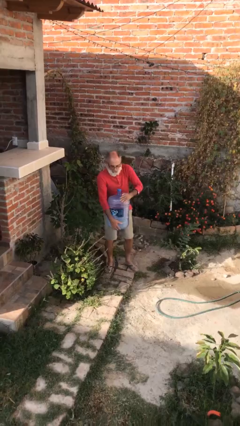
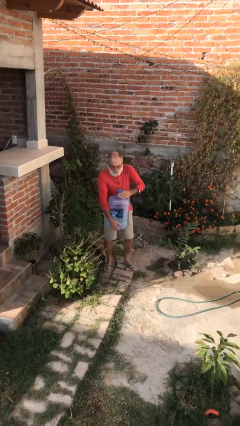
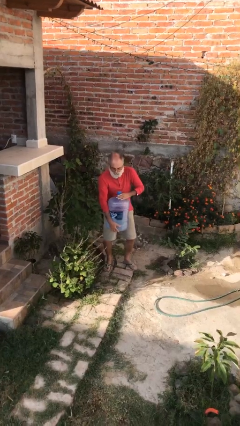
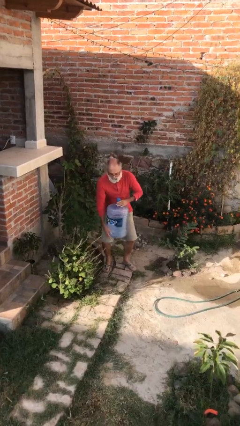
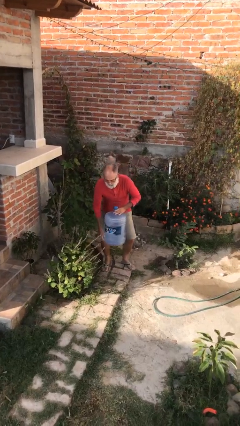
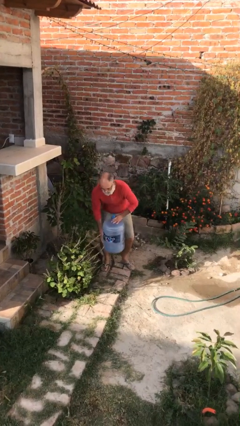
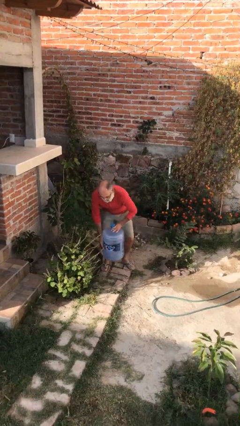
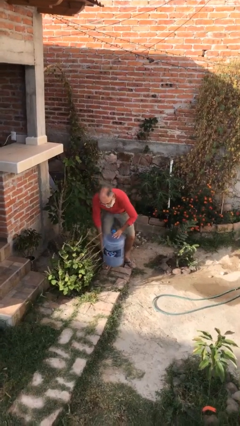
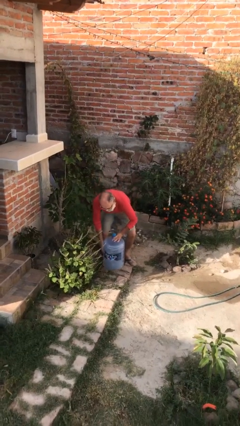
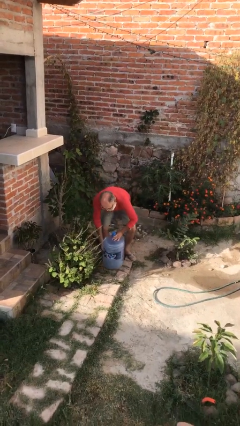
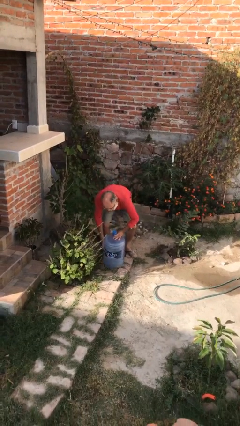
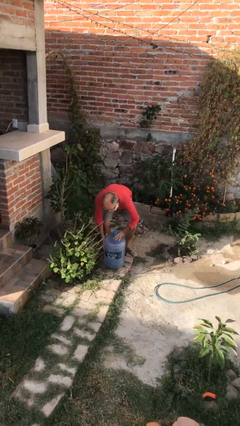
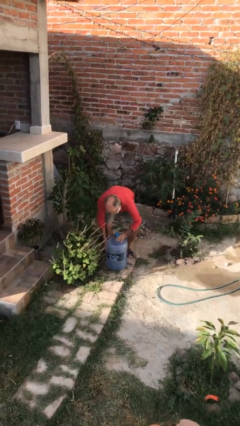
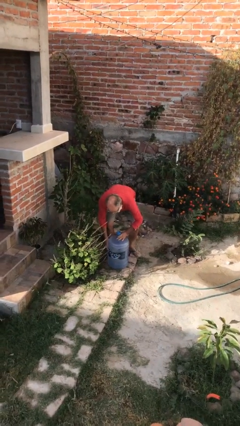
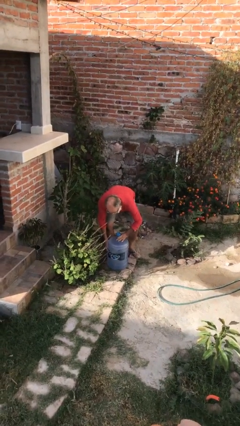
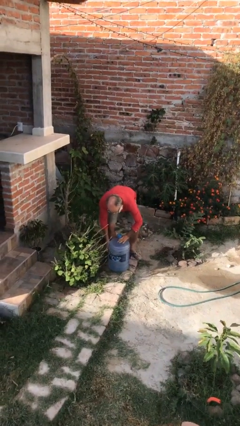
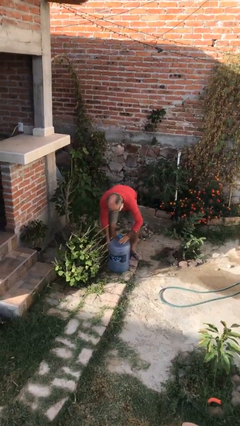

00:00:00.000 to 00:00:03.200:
person puts down object on floor

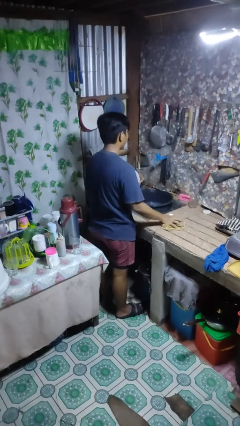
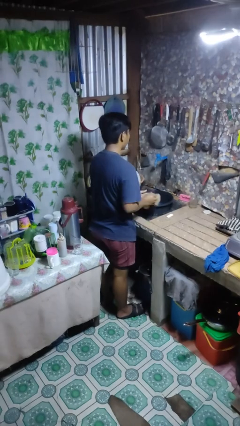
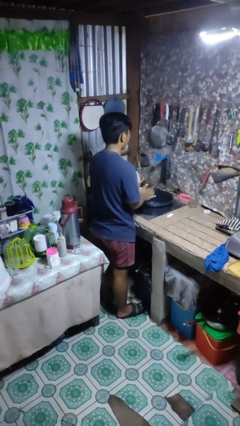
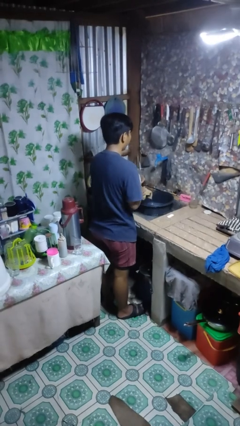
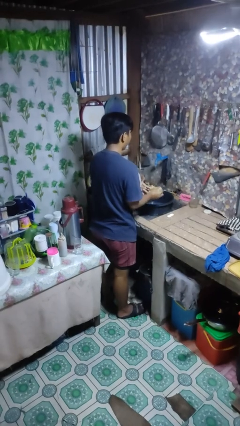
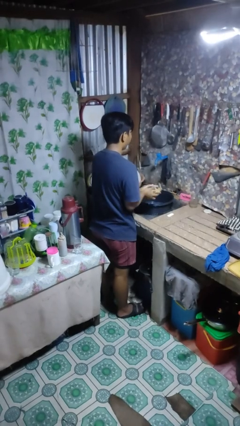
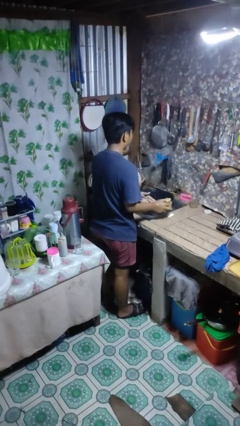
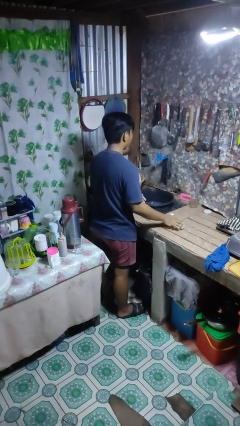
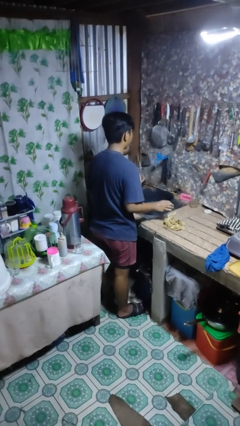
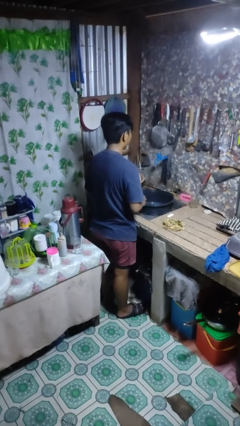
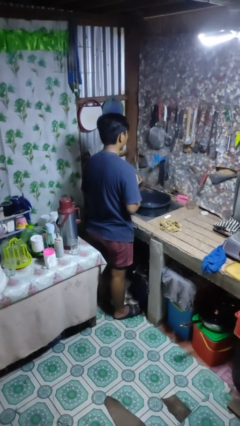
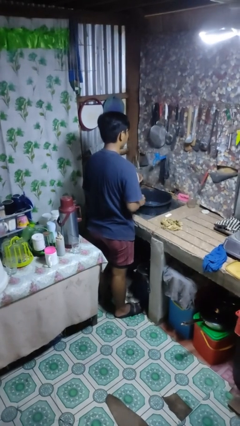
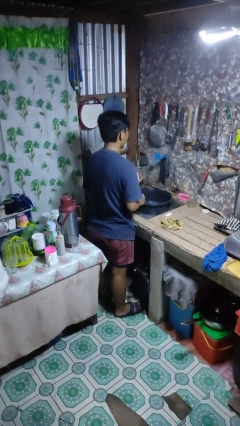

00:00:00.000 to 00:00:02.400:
person dries hands with towel

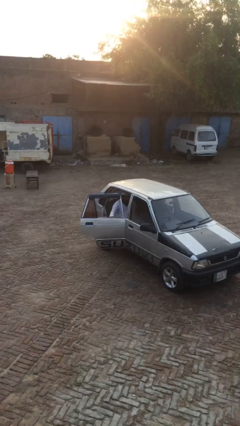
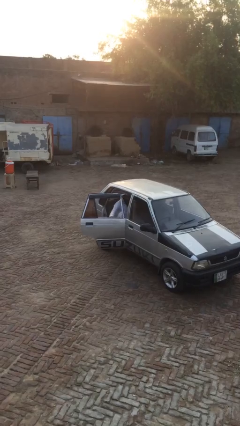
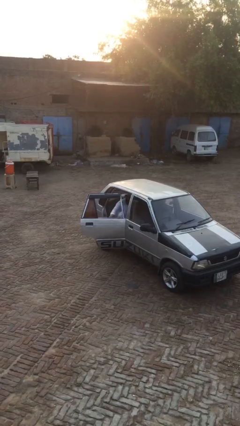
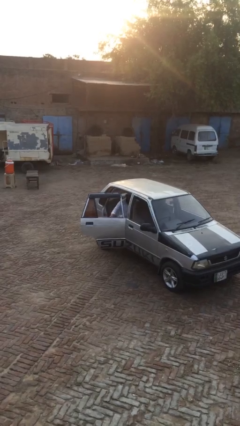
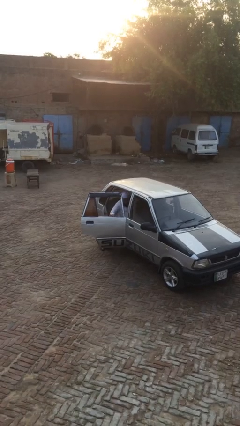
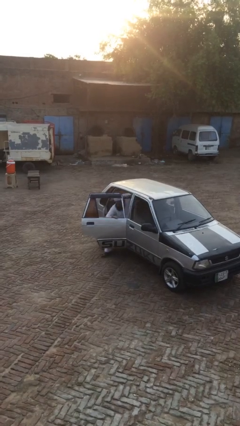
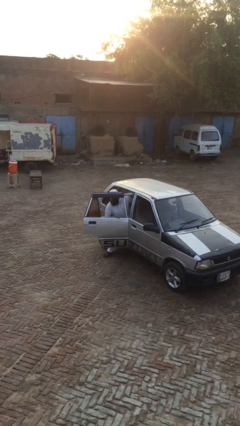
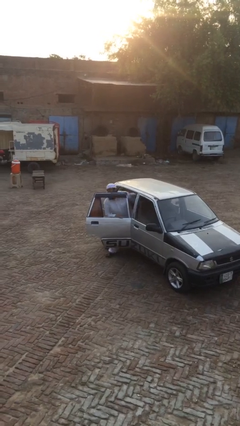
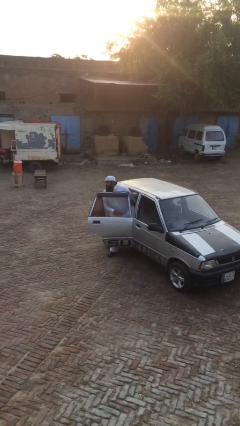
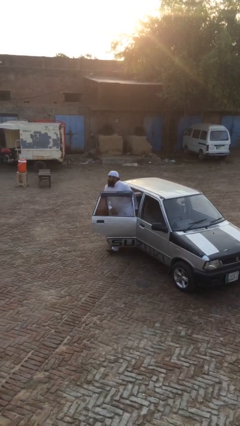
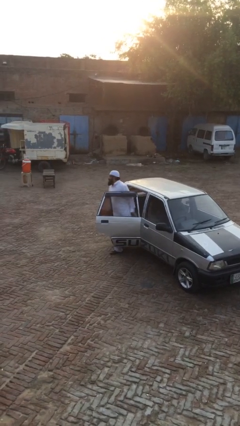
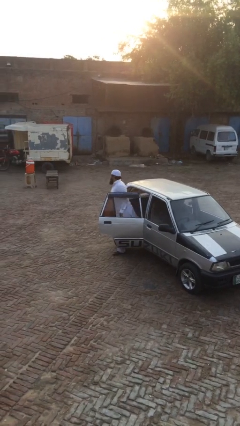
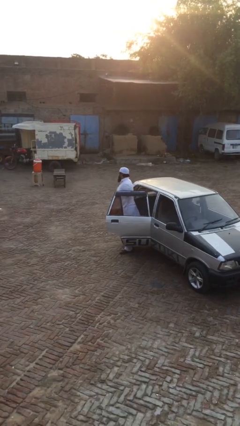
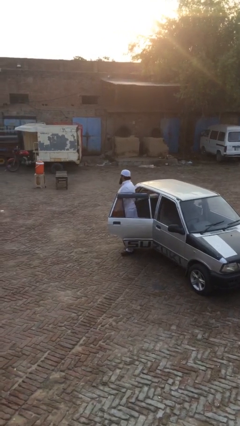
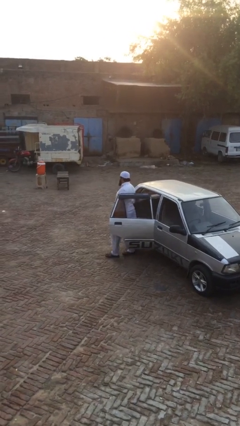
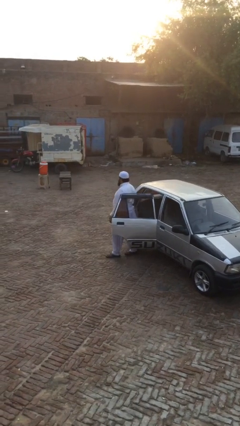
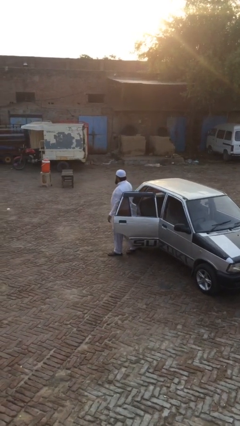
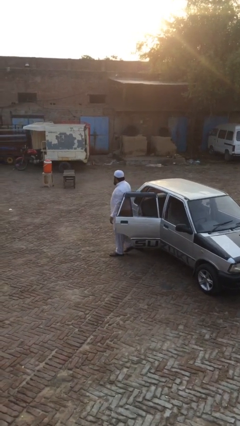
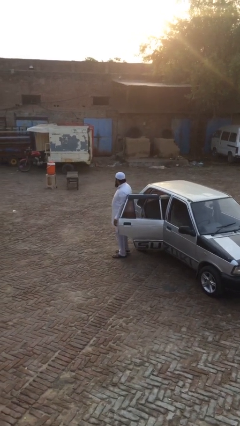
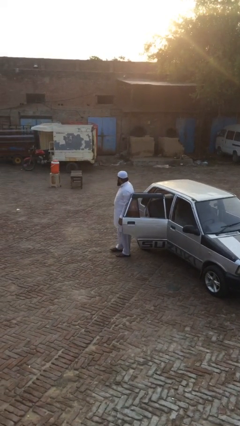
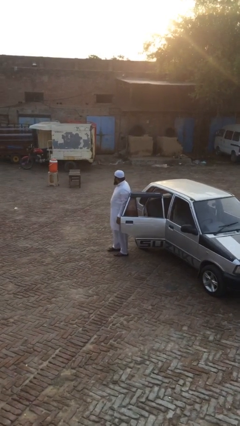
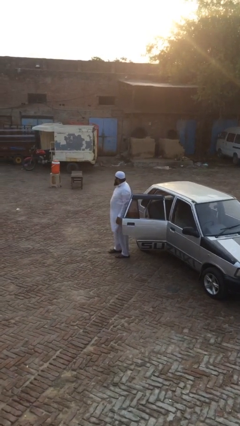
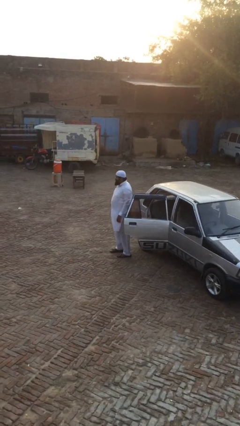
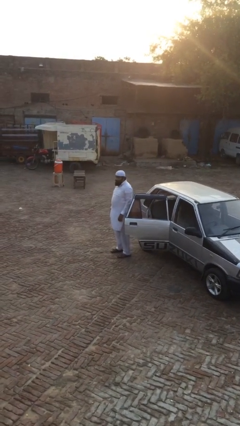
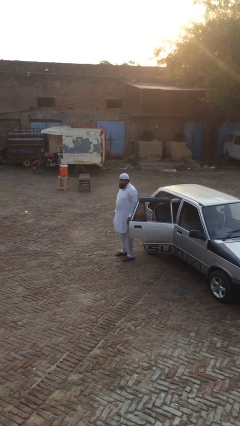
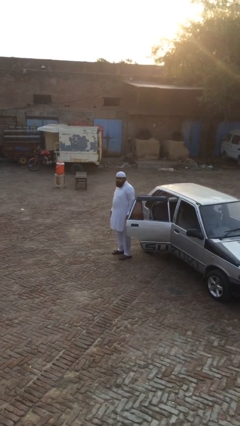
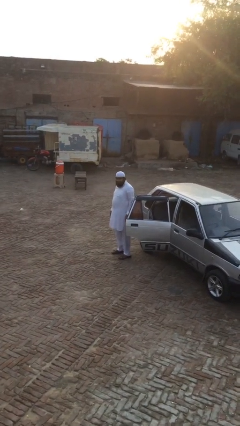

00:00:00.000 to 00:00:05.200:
person exits car

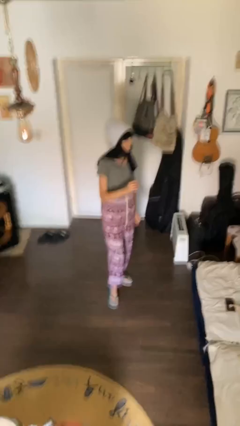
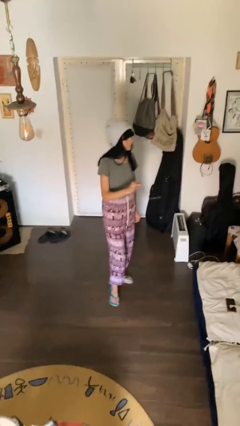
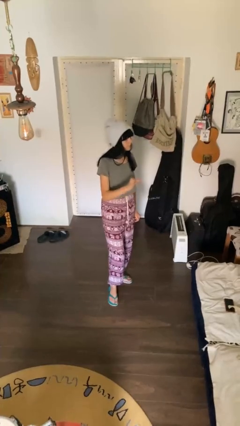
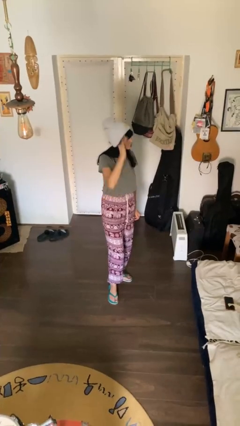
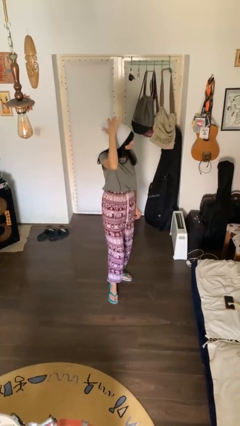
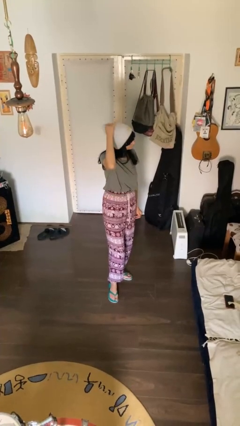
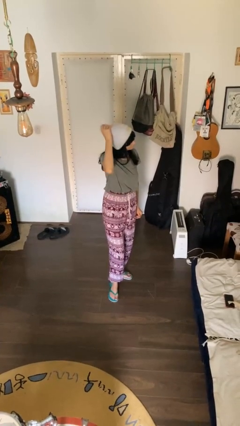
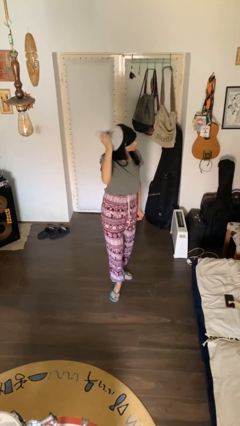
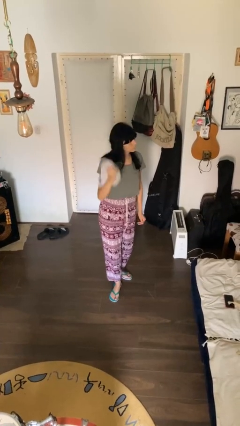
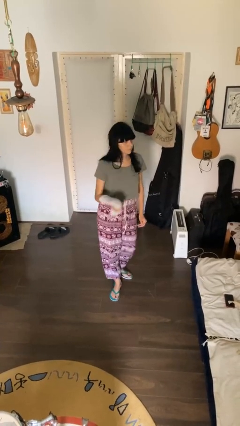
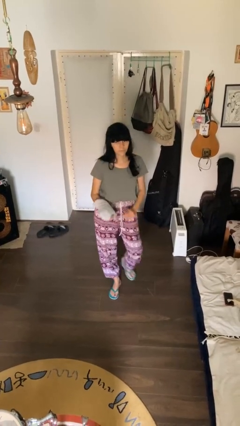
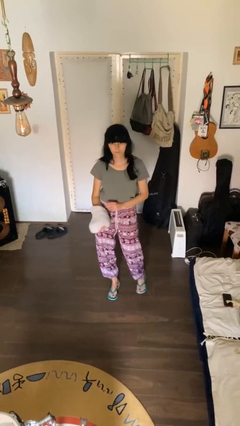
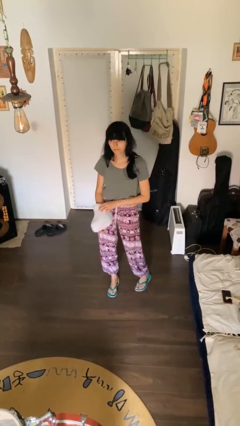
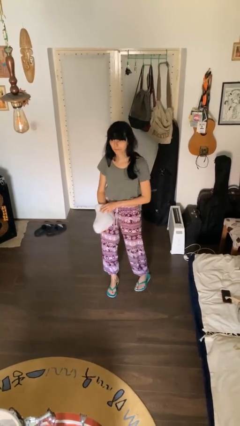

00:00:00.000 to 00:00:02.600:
person takes off hat

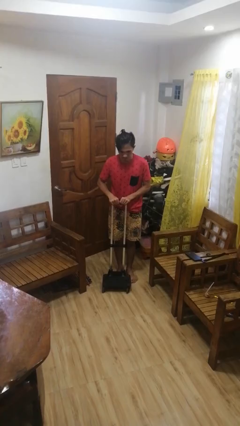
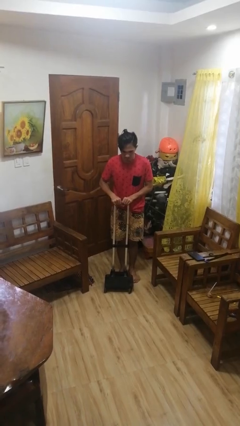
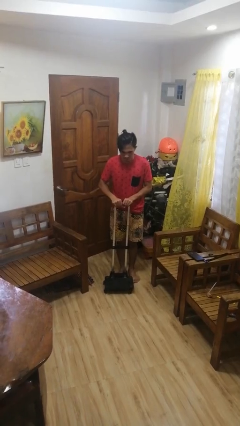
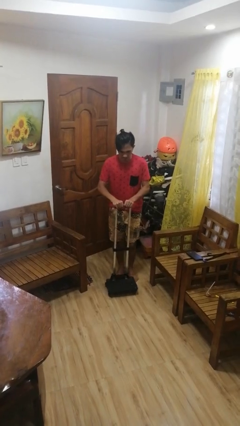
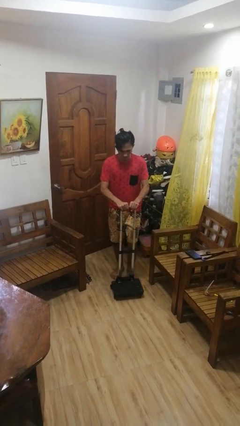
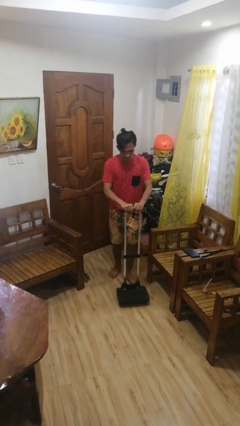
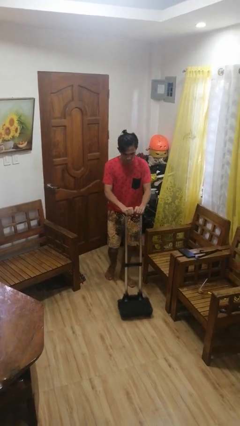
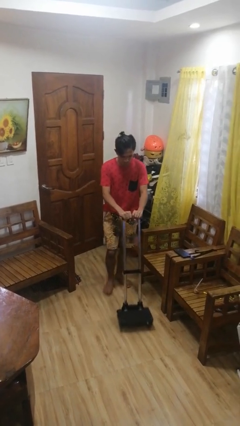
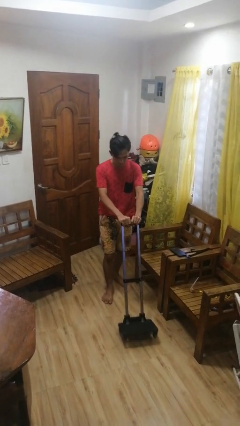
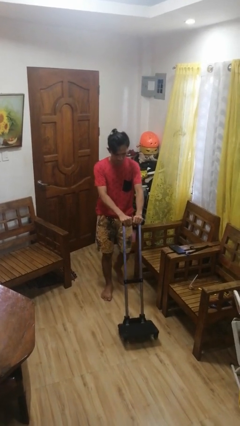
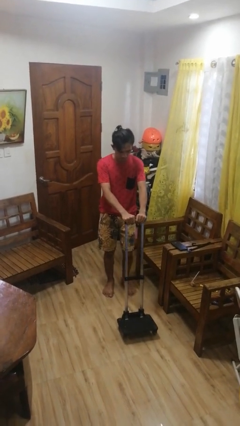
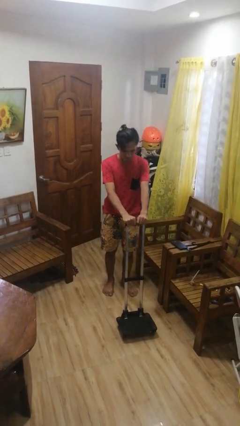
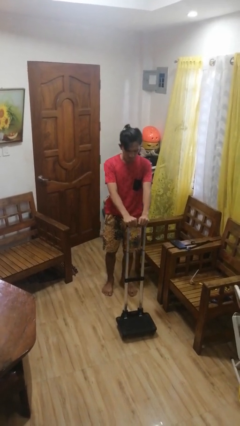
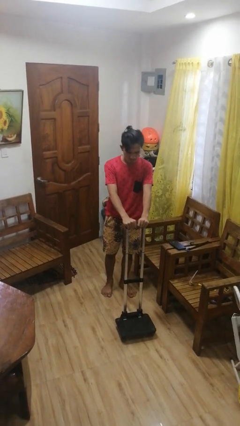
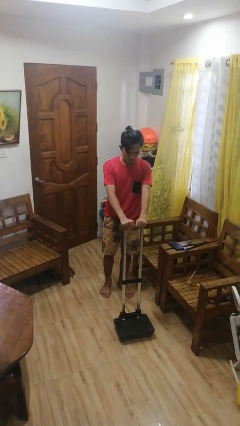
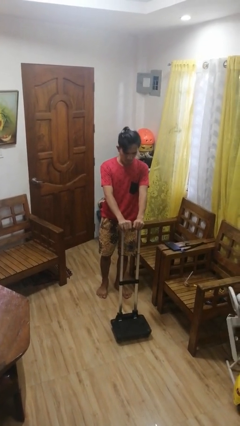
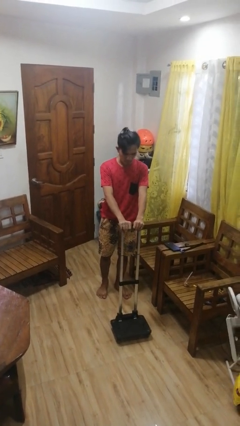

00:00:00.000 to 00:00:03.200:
person pushes wheeled cart

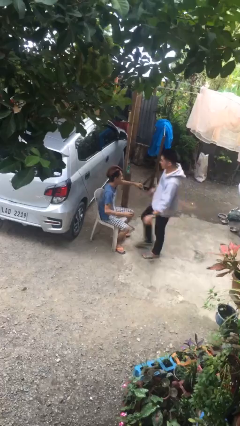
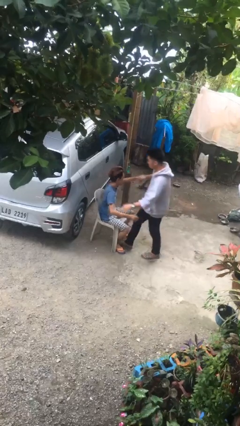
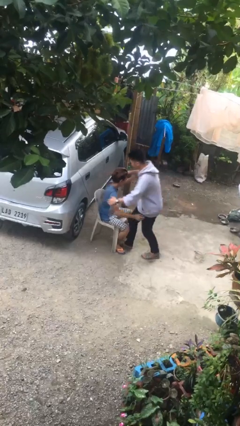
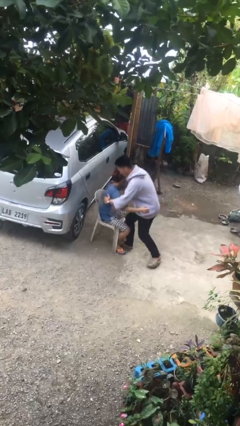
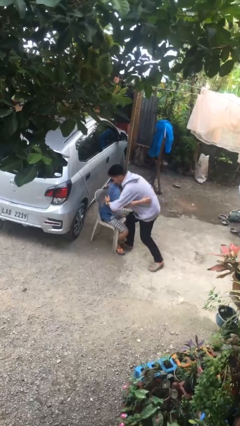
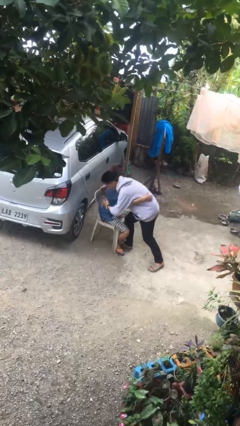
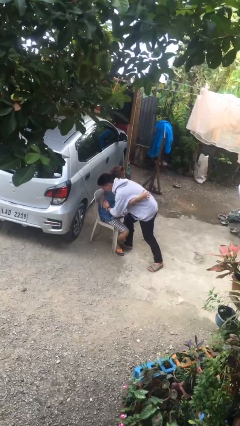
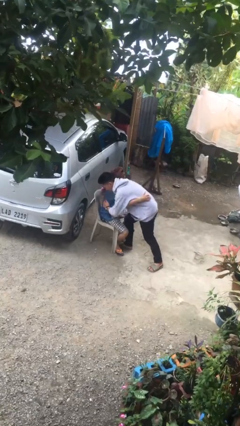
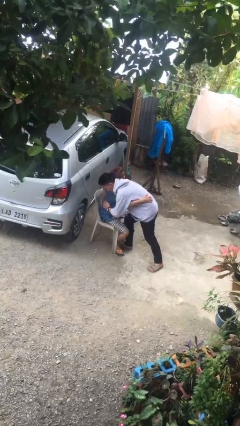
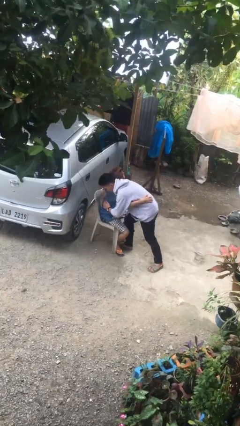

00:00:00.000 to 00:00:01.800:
person embraces person
